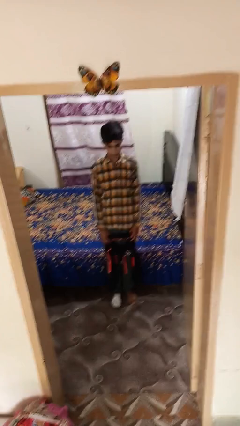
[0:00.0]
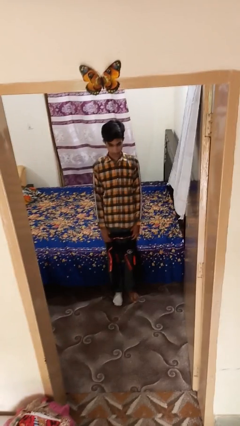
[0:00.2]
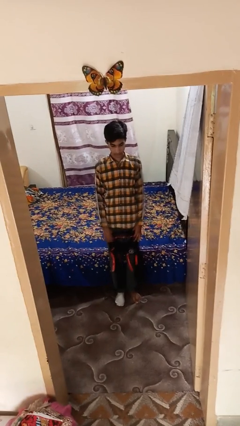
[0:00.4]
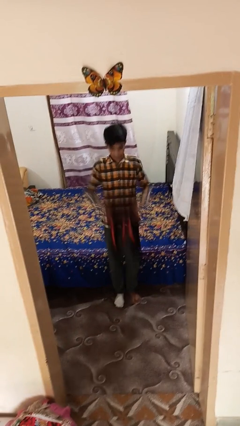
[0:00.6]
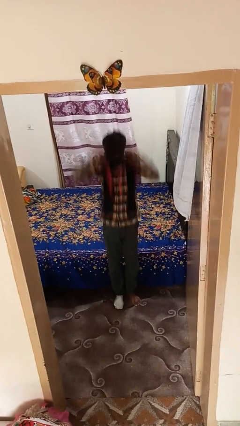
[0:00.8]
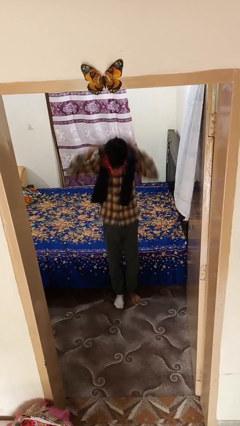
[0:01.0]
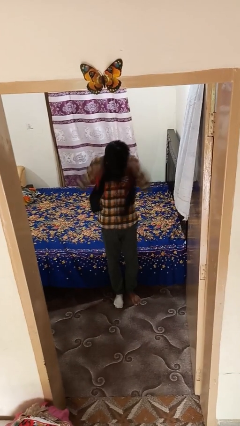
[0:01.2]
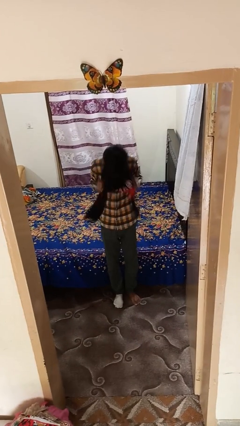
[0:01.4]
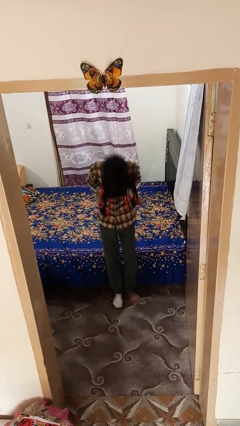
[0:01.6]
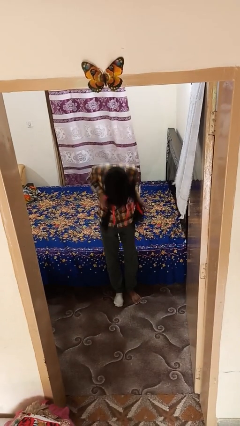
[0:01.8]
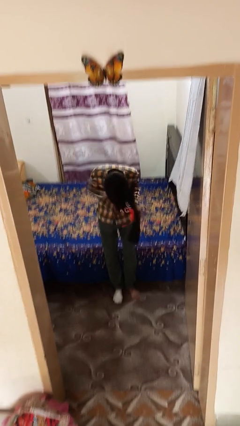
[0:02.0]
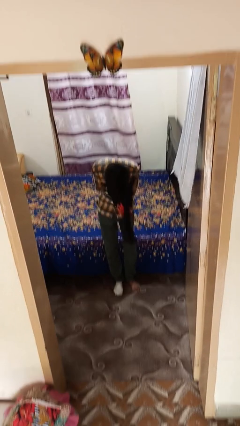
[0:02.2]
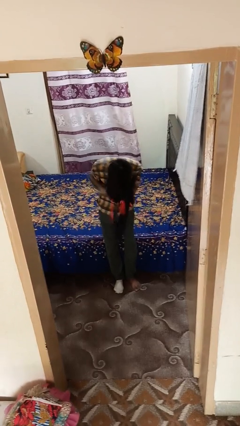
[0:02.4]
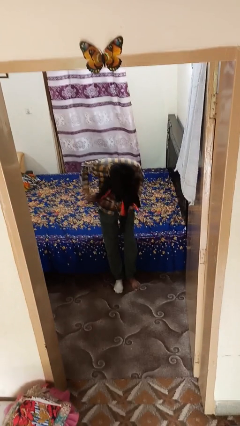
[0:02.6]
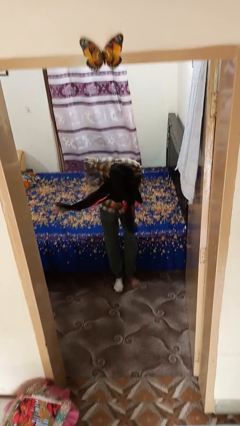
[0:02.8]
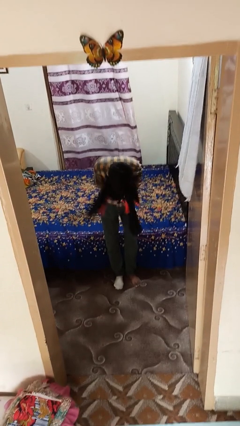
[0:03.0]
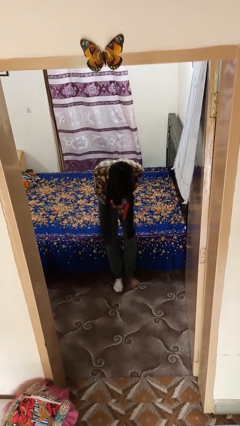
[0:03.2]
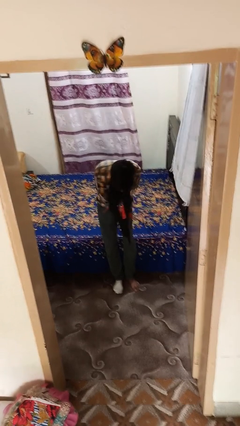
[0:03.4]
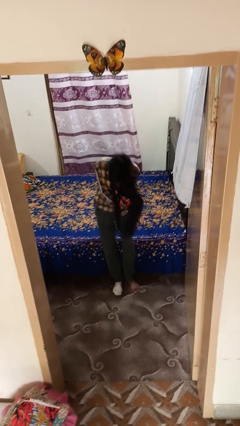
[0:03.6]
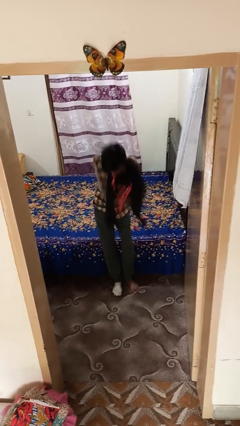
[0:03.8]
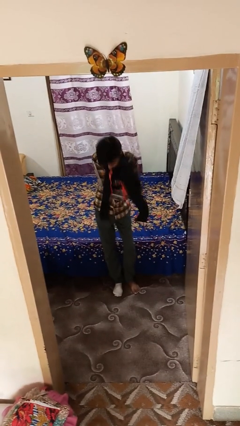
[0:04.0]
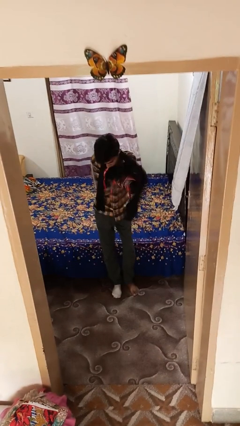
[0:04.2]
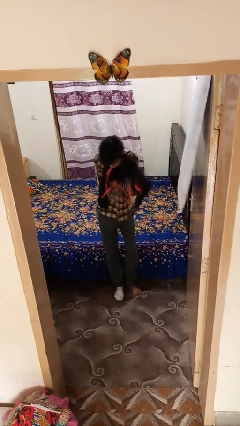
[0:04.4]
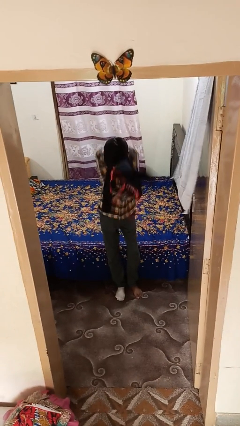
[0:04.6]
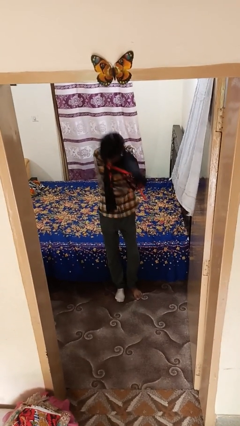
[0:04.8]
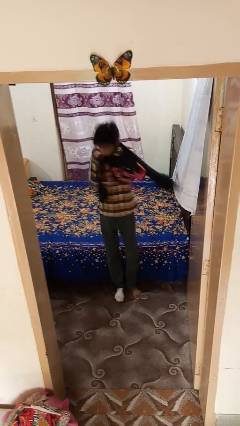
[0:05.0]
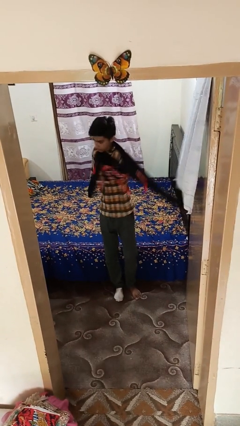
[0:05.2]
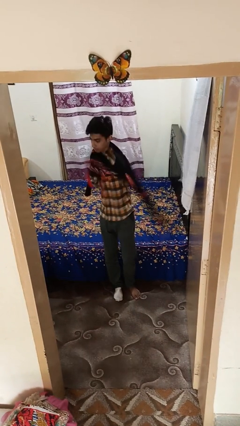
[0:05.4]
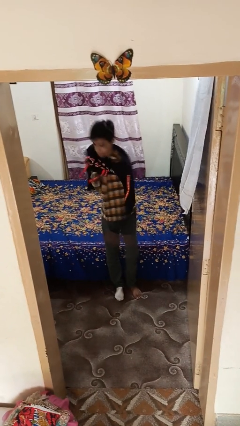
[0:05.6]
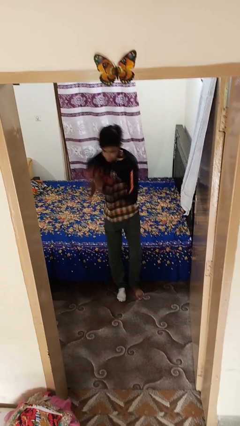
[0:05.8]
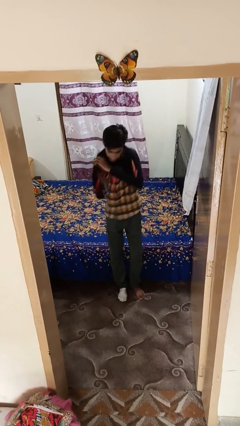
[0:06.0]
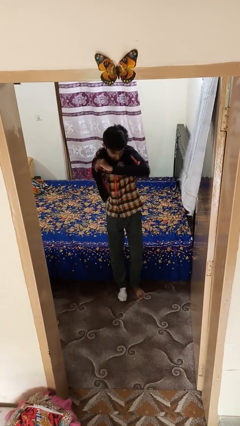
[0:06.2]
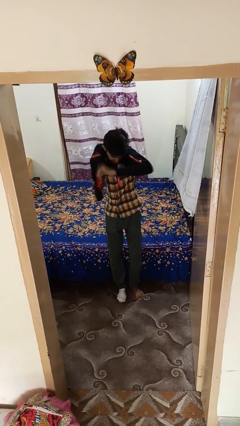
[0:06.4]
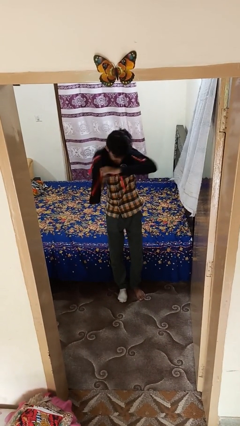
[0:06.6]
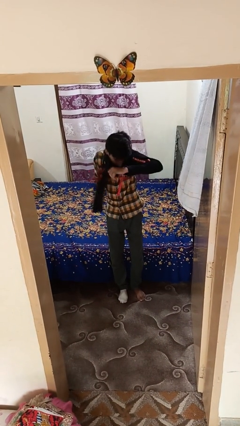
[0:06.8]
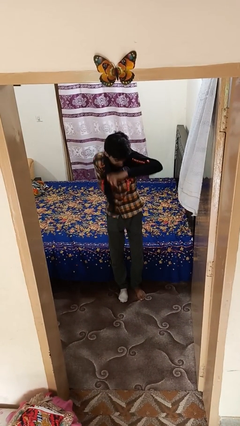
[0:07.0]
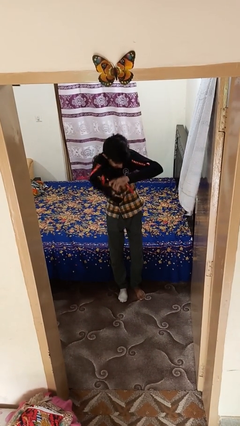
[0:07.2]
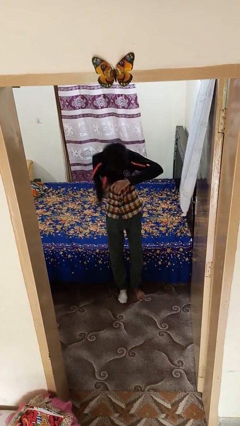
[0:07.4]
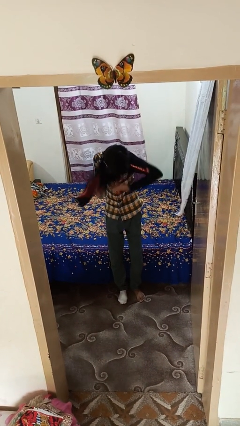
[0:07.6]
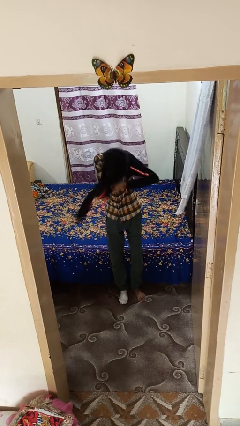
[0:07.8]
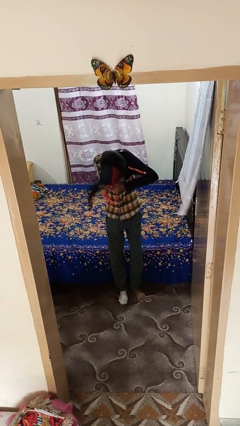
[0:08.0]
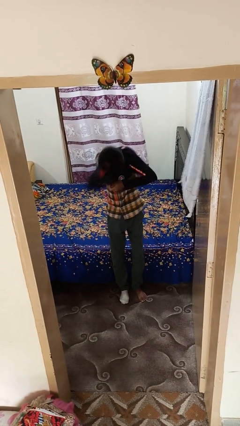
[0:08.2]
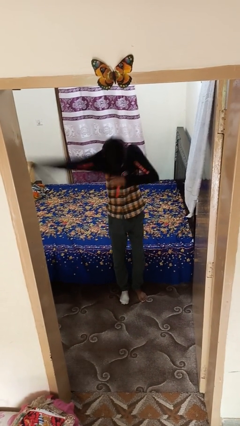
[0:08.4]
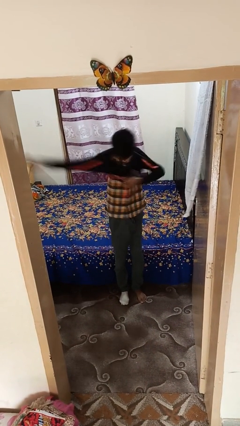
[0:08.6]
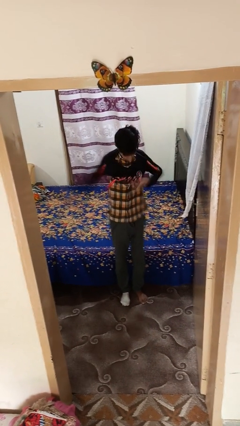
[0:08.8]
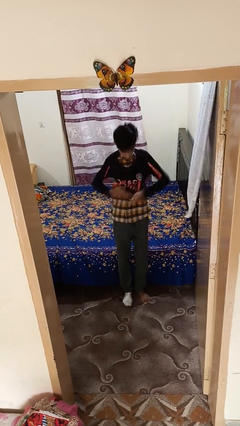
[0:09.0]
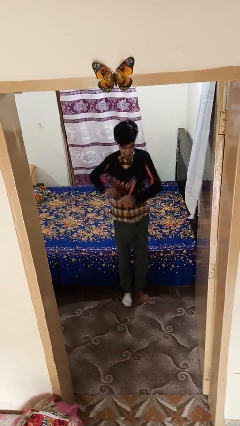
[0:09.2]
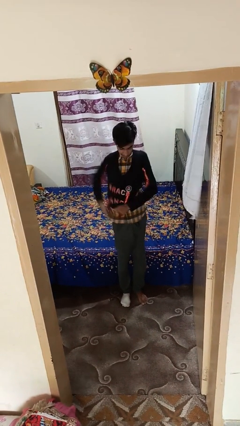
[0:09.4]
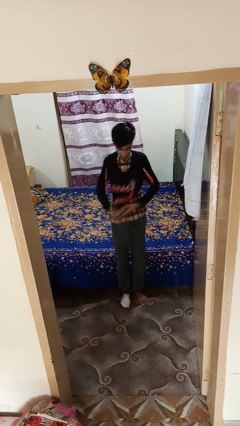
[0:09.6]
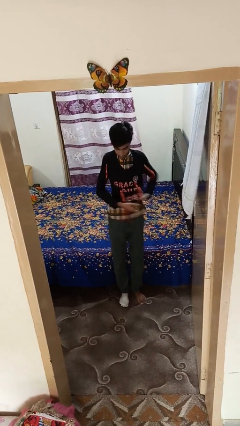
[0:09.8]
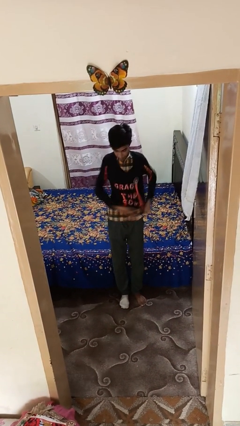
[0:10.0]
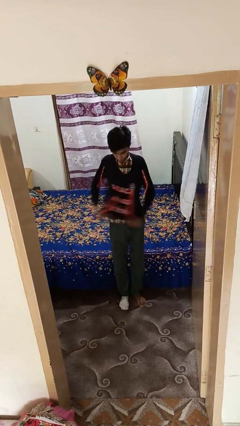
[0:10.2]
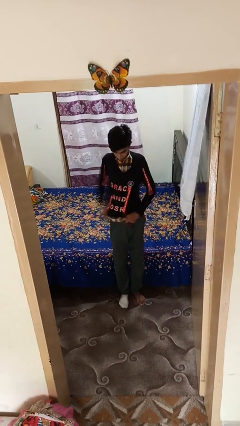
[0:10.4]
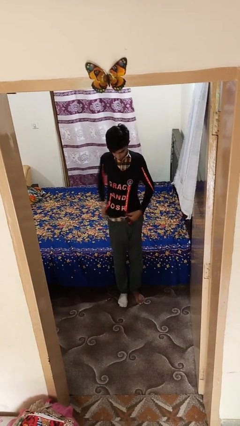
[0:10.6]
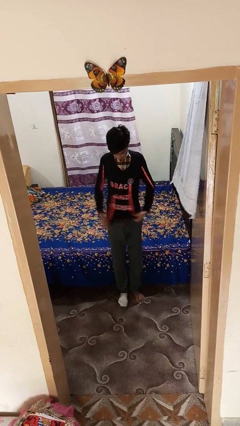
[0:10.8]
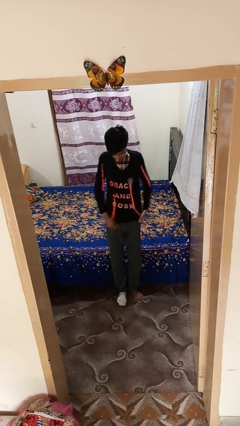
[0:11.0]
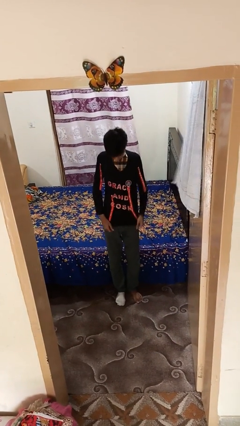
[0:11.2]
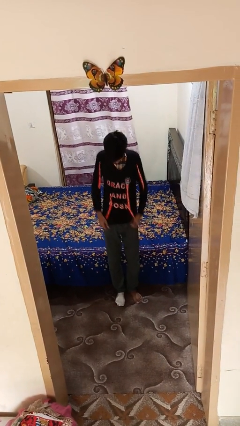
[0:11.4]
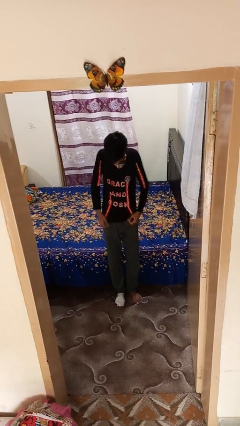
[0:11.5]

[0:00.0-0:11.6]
person puts on shirt

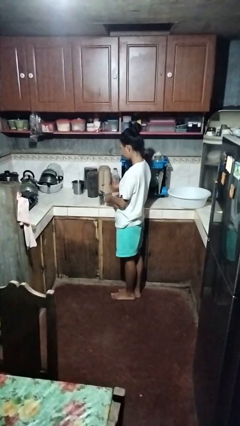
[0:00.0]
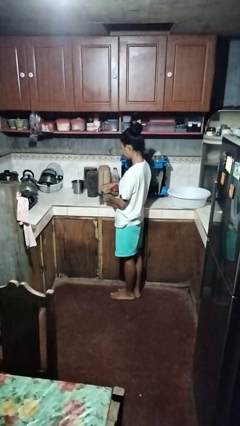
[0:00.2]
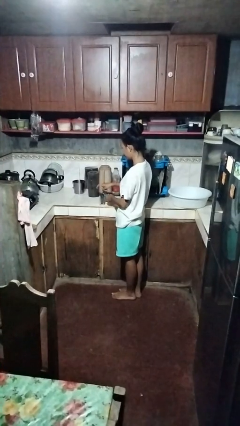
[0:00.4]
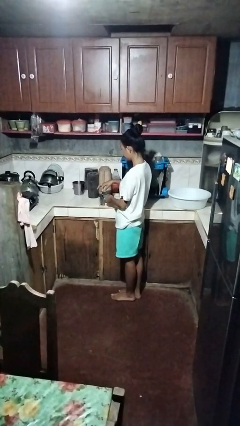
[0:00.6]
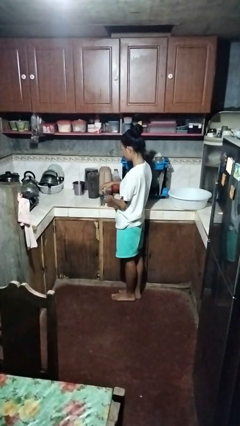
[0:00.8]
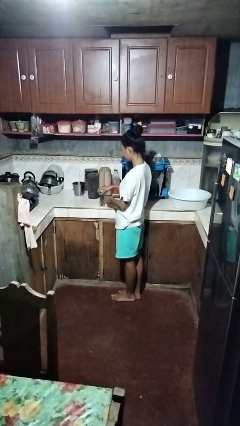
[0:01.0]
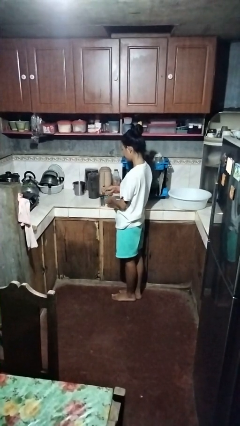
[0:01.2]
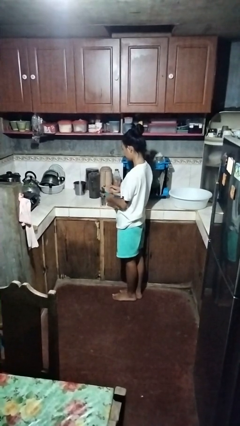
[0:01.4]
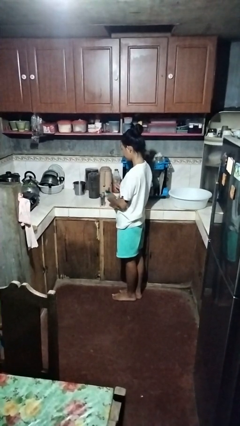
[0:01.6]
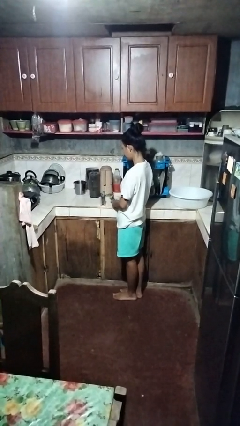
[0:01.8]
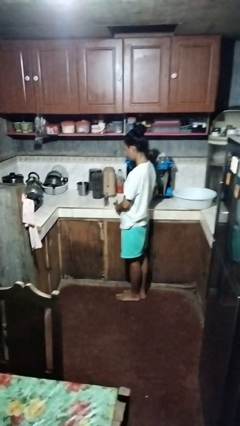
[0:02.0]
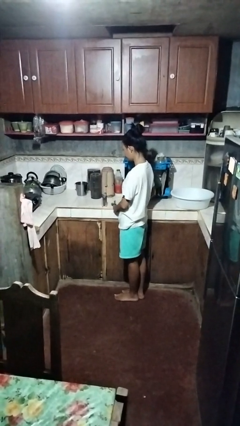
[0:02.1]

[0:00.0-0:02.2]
person opens can with can opener

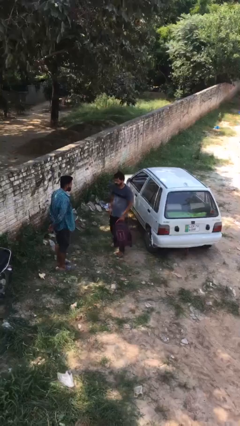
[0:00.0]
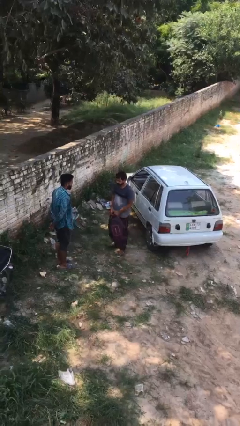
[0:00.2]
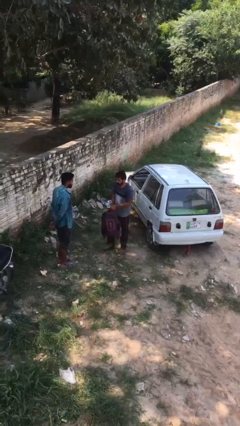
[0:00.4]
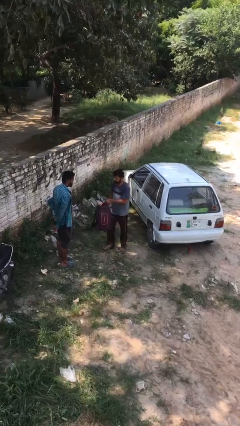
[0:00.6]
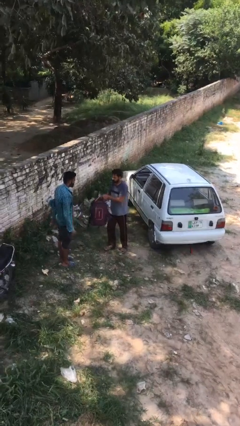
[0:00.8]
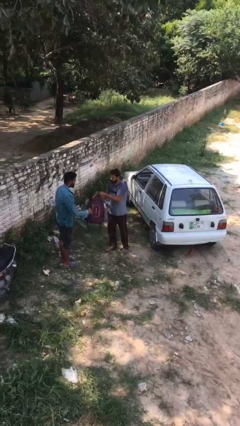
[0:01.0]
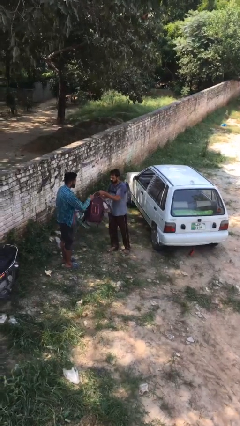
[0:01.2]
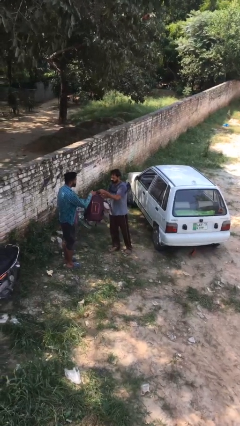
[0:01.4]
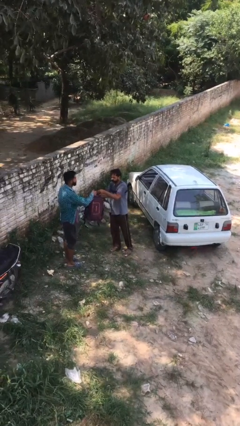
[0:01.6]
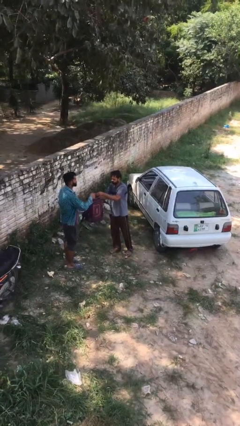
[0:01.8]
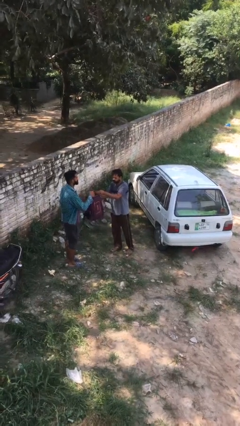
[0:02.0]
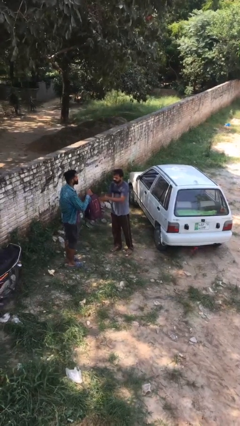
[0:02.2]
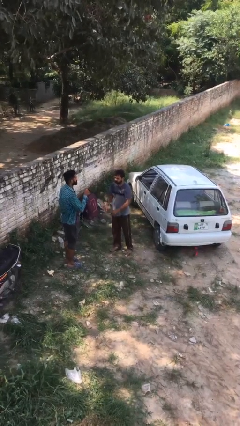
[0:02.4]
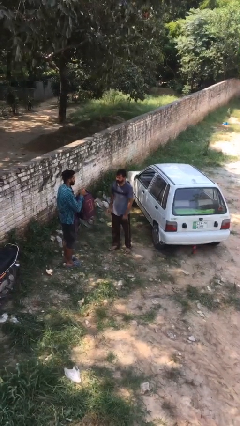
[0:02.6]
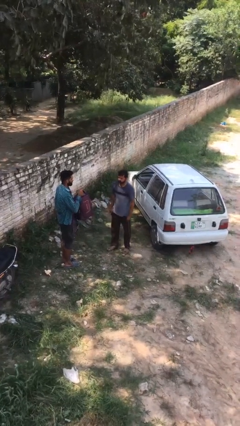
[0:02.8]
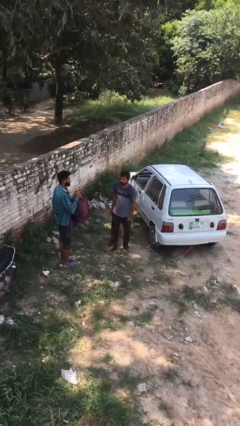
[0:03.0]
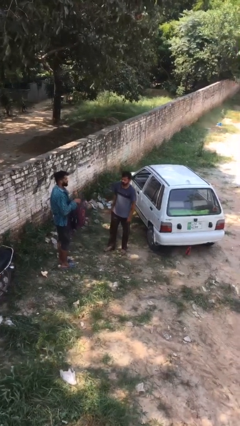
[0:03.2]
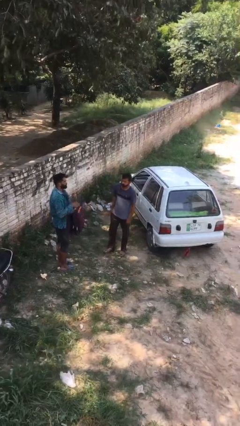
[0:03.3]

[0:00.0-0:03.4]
person transfers object to person

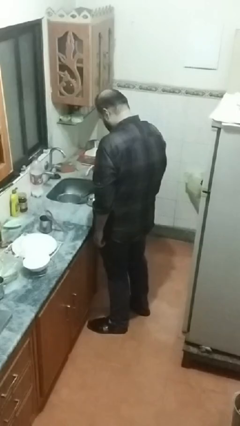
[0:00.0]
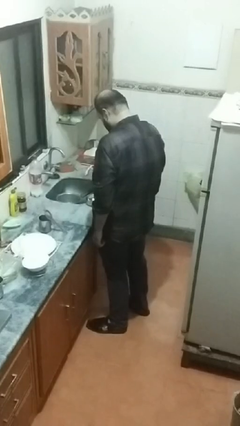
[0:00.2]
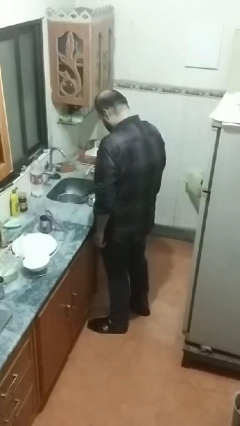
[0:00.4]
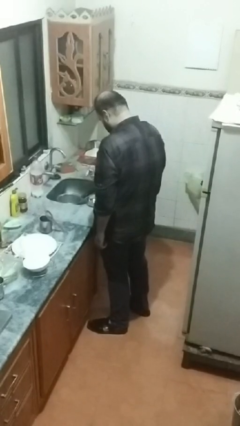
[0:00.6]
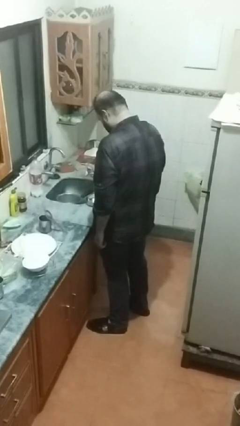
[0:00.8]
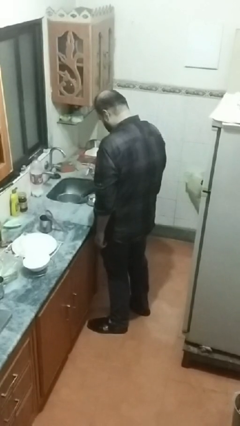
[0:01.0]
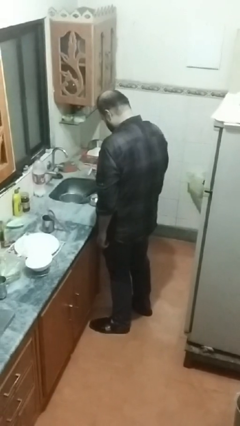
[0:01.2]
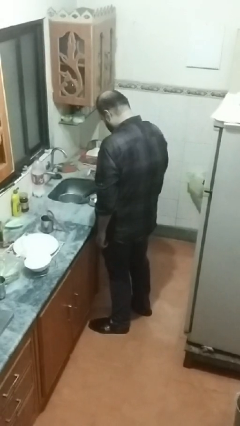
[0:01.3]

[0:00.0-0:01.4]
person pours into bowl
